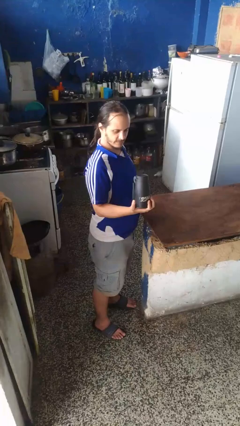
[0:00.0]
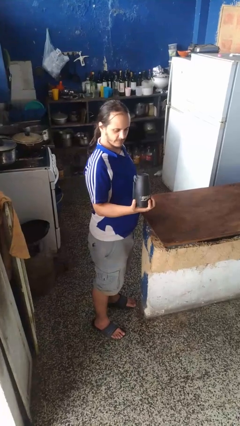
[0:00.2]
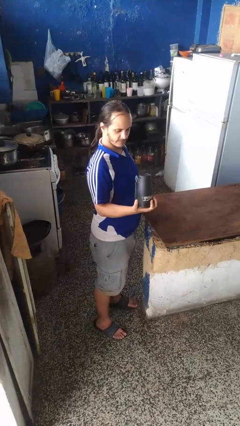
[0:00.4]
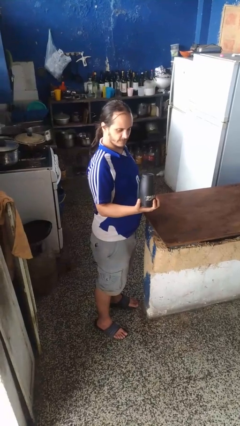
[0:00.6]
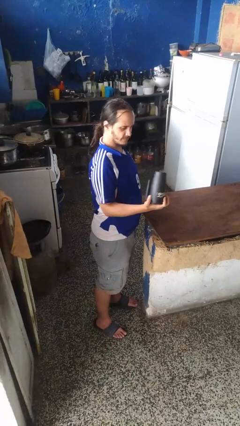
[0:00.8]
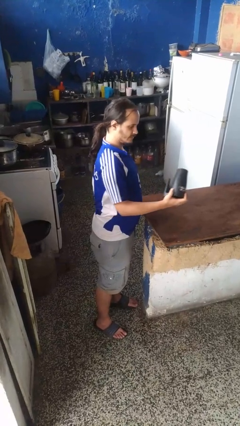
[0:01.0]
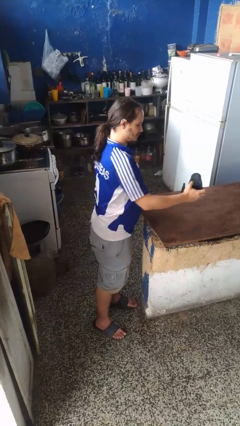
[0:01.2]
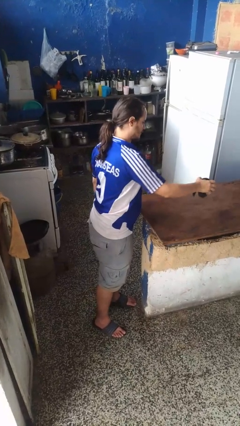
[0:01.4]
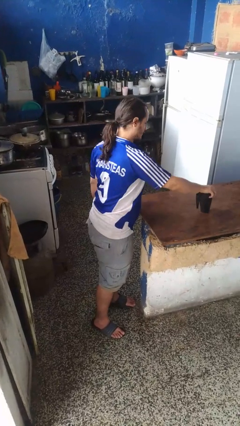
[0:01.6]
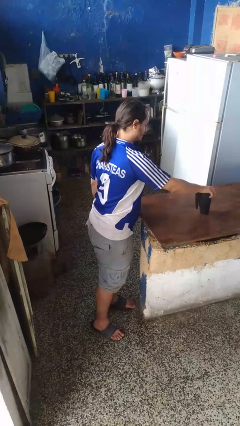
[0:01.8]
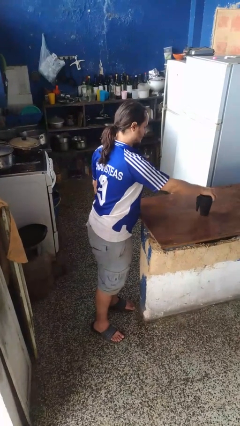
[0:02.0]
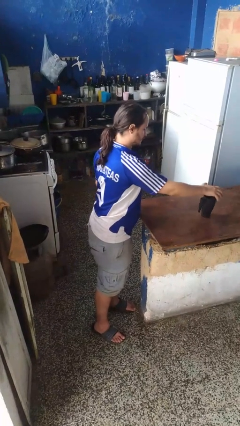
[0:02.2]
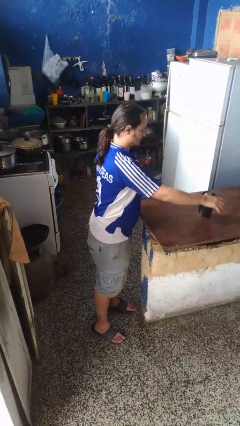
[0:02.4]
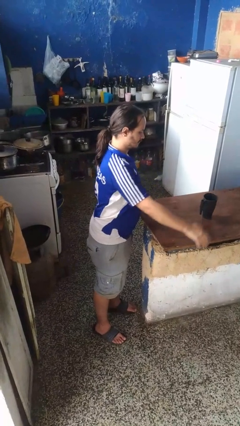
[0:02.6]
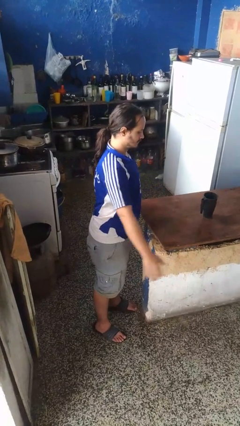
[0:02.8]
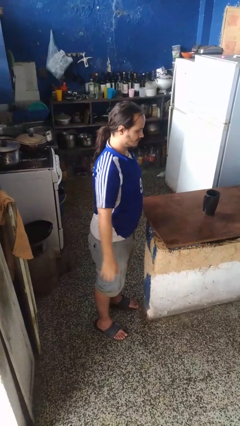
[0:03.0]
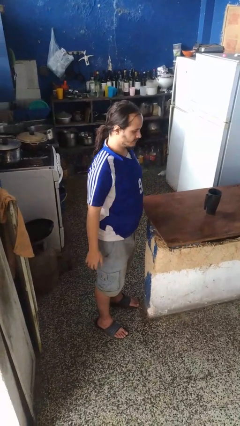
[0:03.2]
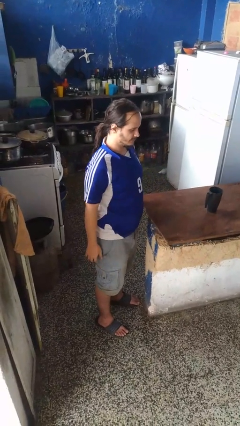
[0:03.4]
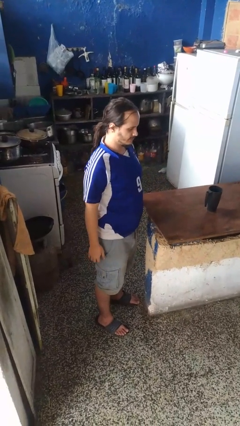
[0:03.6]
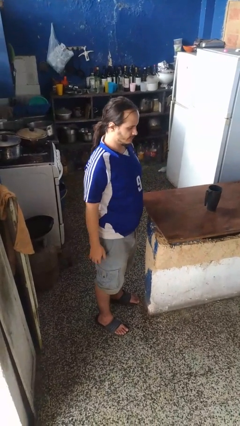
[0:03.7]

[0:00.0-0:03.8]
person puts down object on countertop

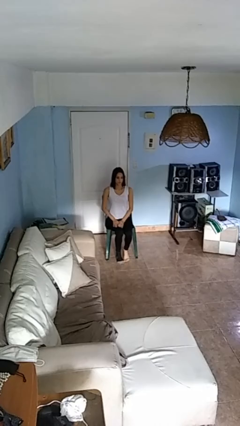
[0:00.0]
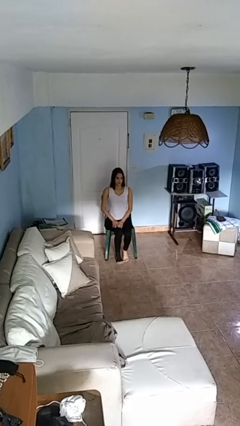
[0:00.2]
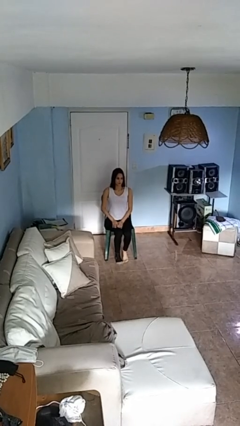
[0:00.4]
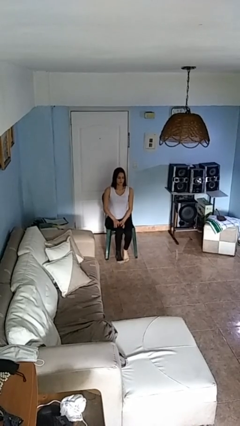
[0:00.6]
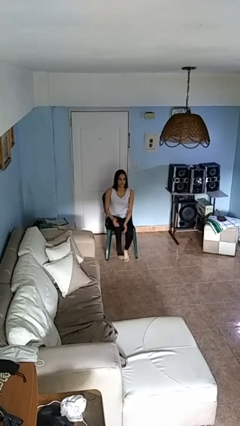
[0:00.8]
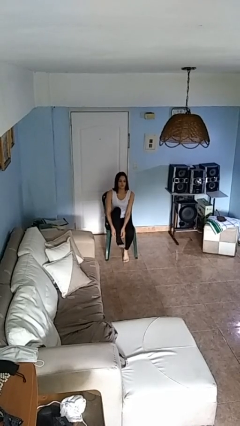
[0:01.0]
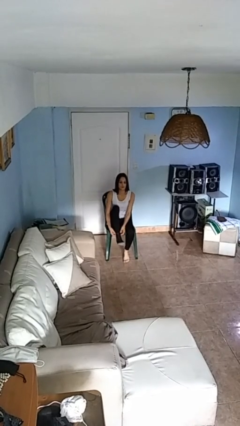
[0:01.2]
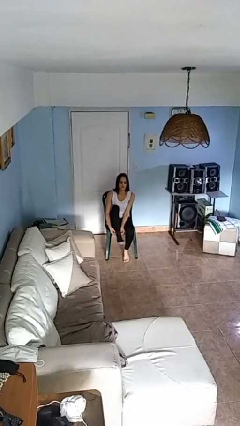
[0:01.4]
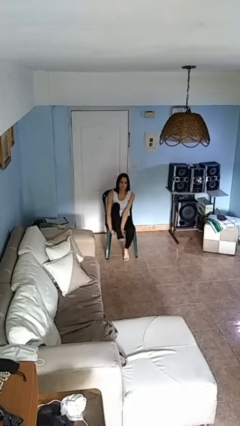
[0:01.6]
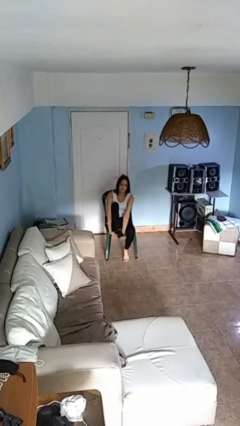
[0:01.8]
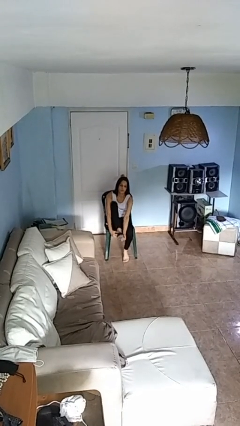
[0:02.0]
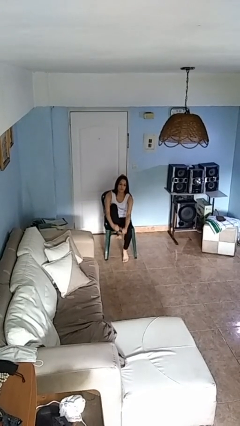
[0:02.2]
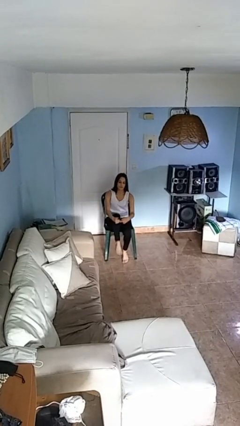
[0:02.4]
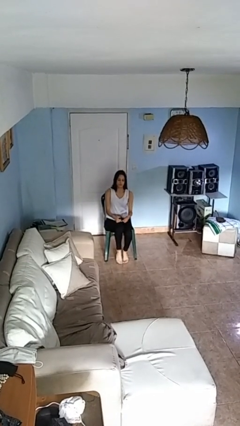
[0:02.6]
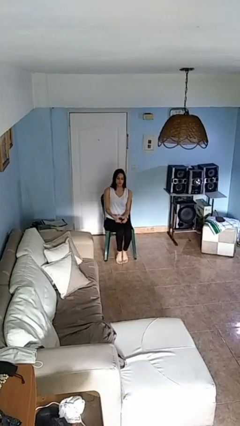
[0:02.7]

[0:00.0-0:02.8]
person takes off socks

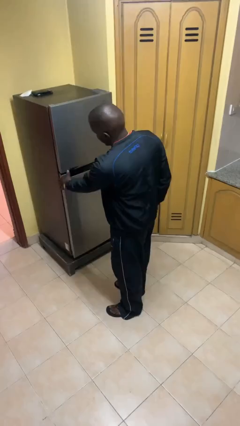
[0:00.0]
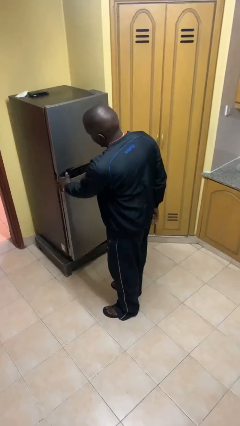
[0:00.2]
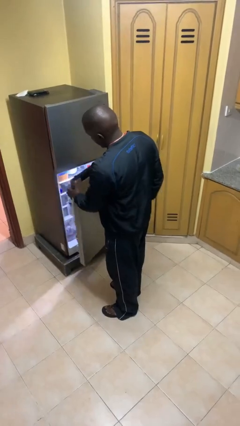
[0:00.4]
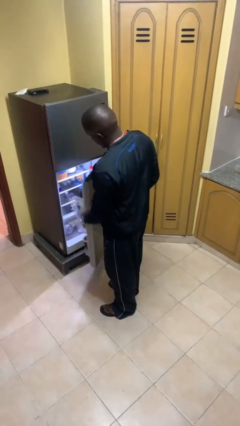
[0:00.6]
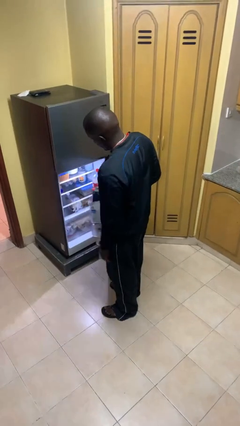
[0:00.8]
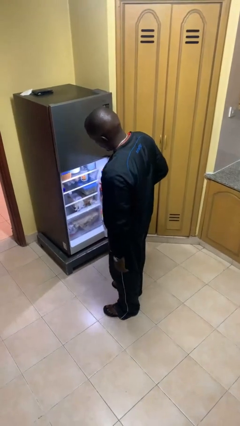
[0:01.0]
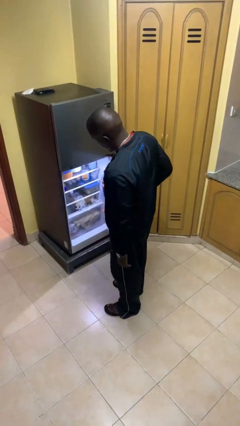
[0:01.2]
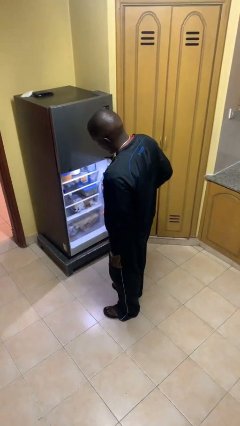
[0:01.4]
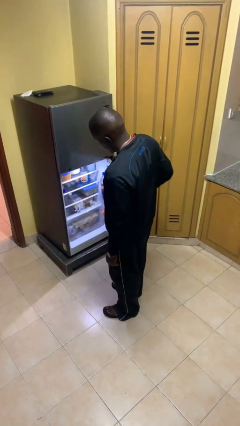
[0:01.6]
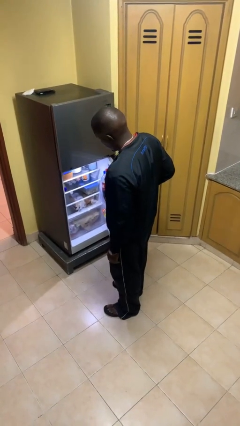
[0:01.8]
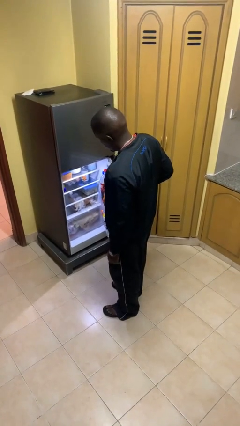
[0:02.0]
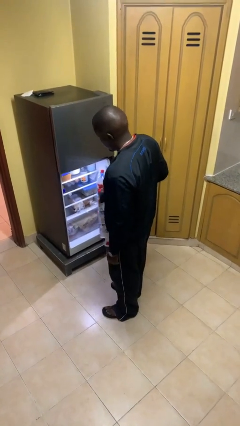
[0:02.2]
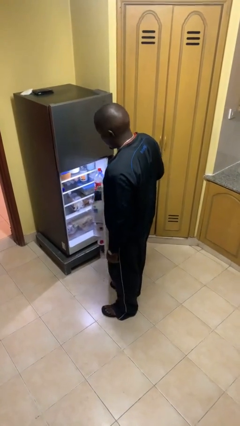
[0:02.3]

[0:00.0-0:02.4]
person opens refrigerator

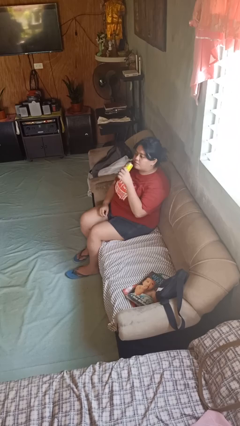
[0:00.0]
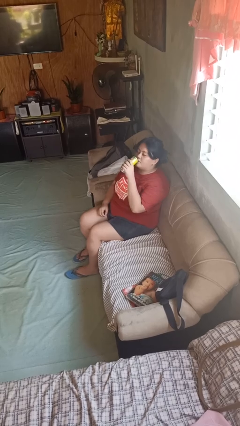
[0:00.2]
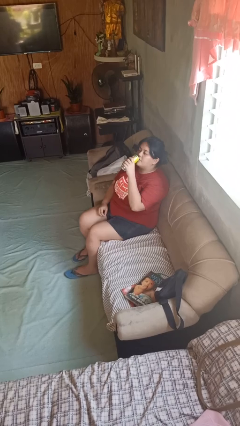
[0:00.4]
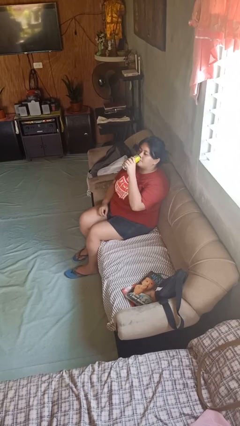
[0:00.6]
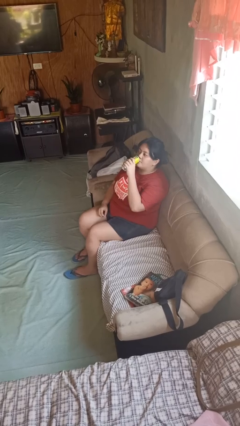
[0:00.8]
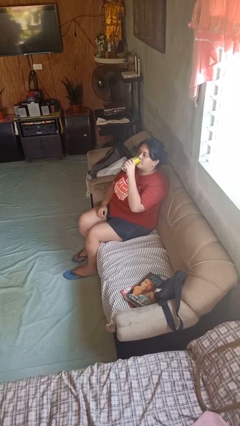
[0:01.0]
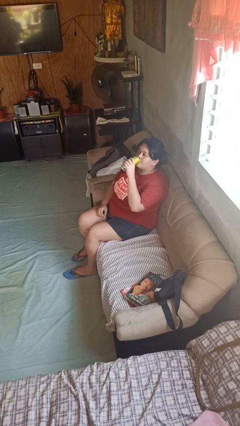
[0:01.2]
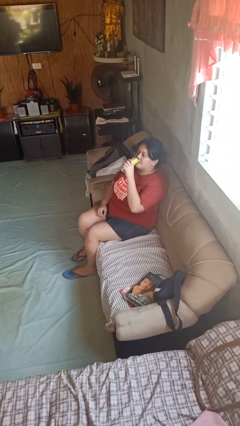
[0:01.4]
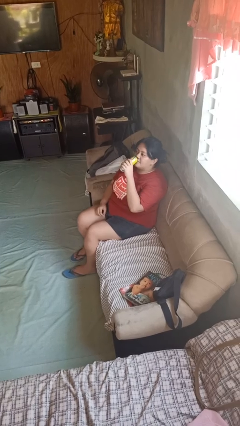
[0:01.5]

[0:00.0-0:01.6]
person drinks from beverage can

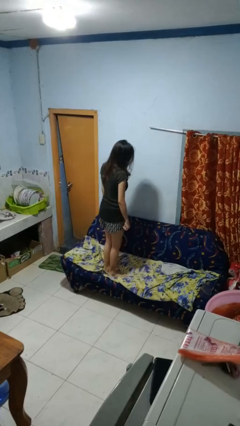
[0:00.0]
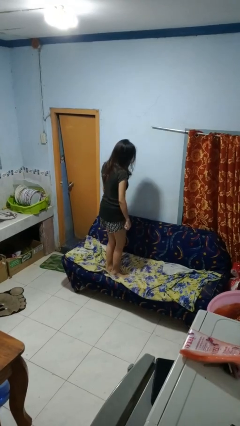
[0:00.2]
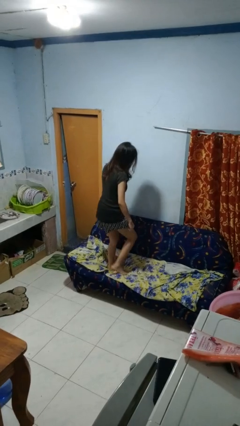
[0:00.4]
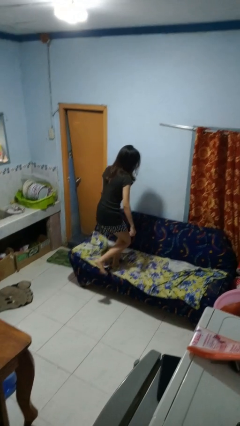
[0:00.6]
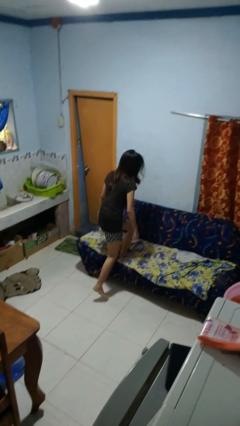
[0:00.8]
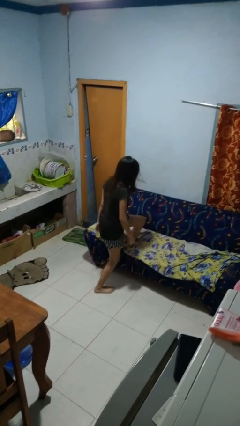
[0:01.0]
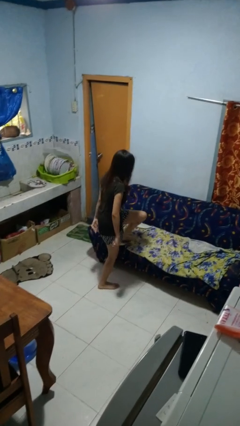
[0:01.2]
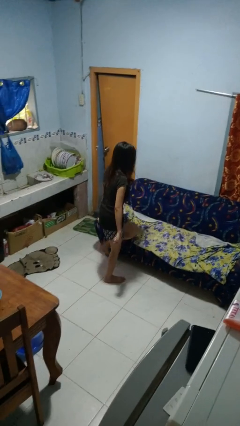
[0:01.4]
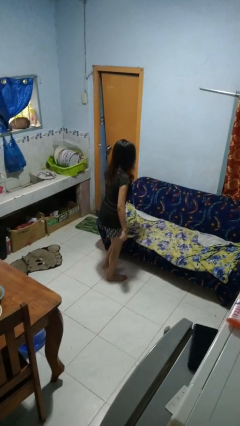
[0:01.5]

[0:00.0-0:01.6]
person climbs off couch

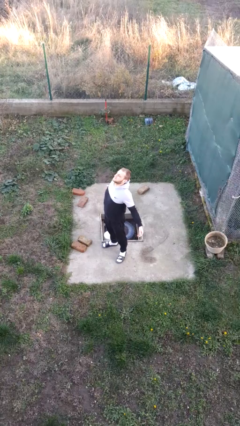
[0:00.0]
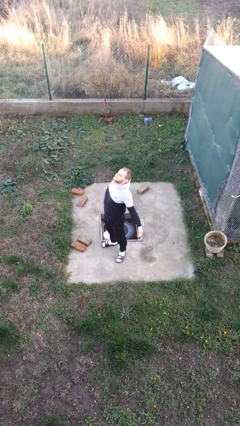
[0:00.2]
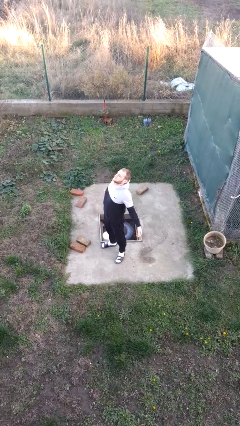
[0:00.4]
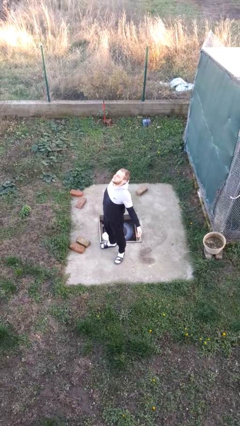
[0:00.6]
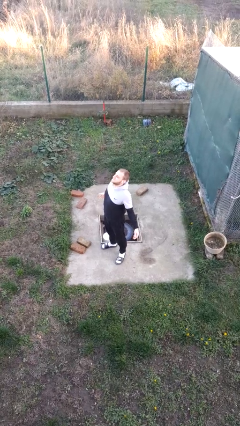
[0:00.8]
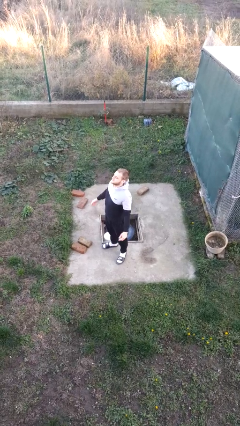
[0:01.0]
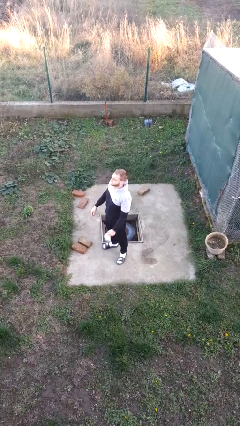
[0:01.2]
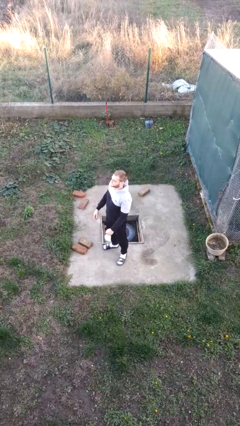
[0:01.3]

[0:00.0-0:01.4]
person stretches back

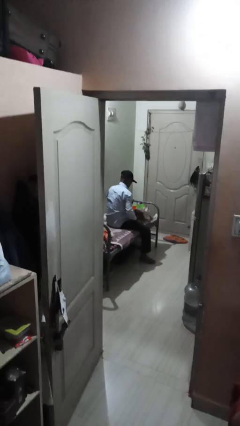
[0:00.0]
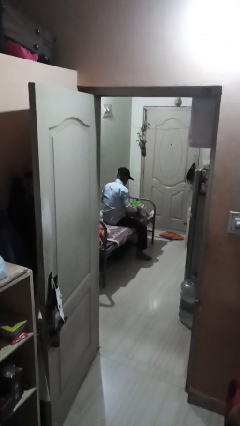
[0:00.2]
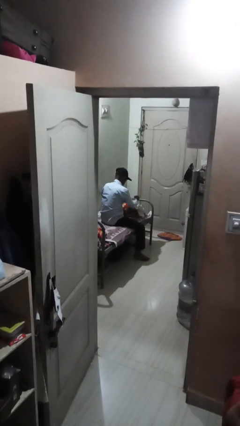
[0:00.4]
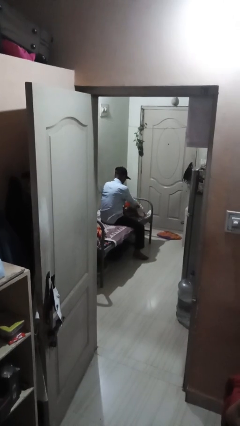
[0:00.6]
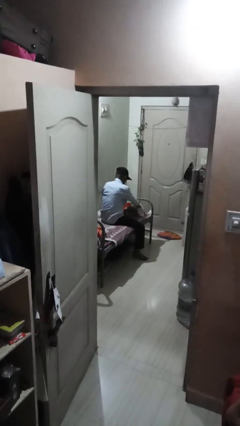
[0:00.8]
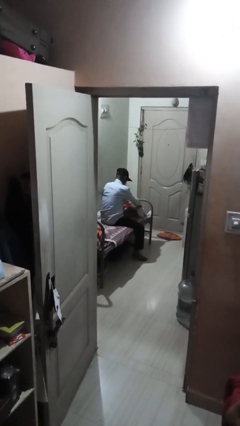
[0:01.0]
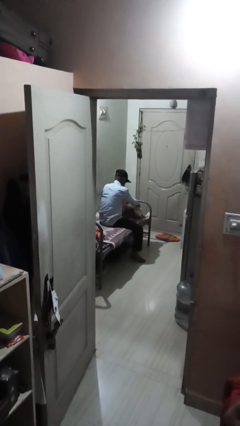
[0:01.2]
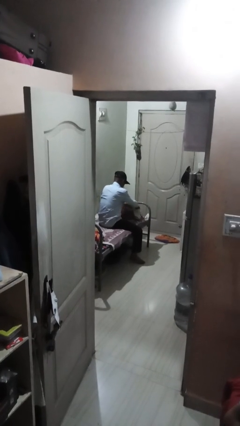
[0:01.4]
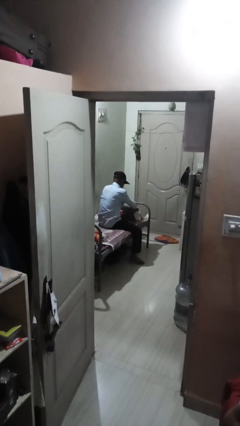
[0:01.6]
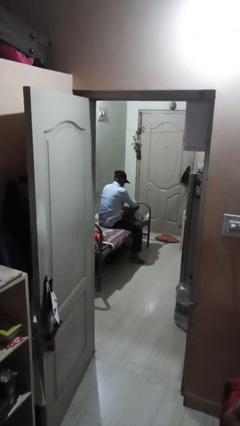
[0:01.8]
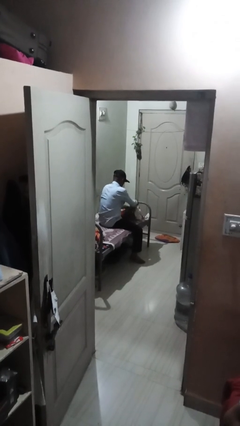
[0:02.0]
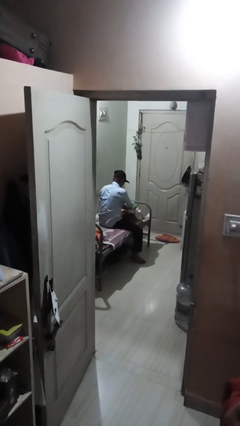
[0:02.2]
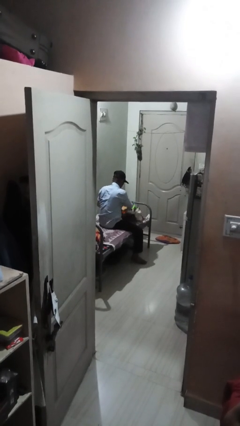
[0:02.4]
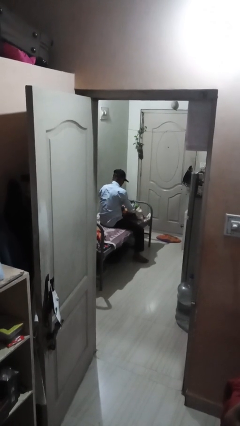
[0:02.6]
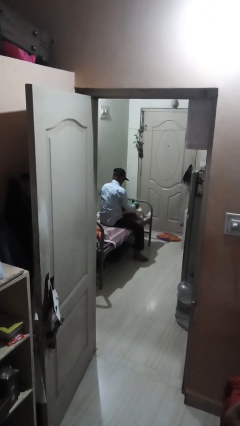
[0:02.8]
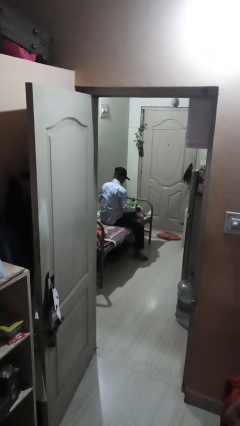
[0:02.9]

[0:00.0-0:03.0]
person searches in bag

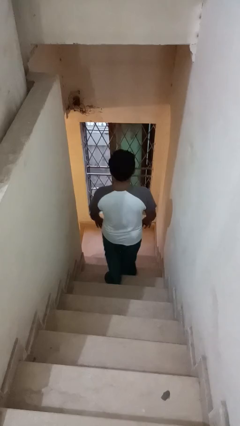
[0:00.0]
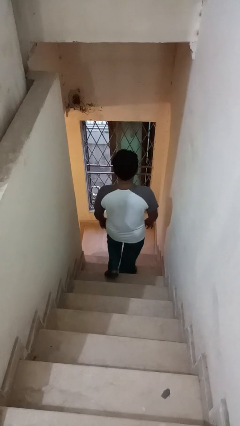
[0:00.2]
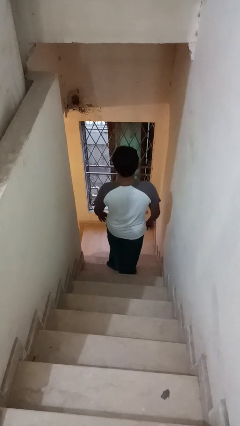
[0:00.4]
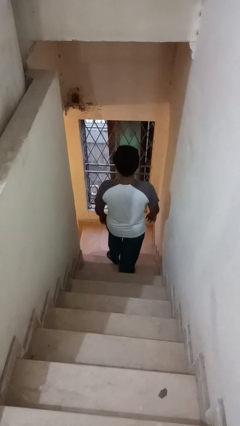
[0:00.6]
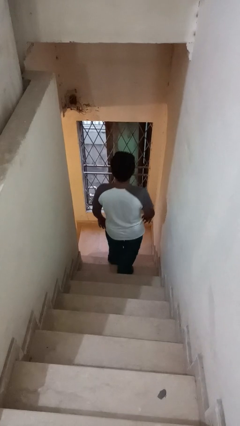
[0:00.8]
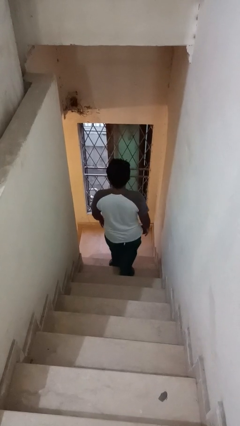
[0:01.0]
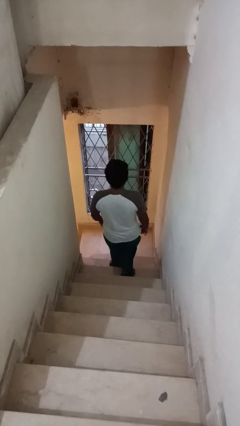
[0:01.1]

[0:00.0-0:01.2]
person climbs down stairs
